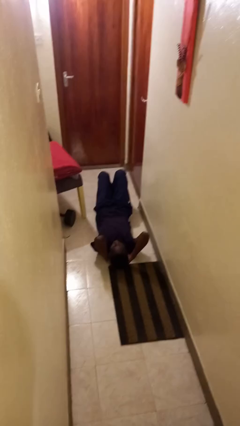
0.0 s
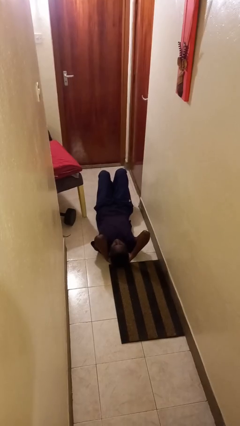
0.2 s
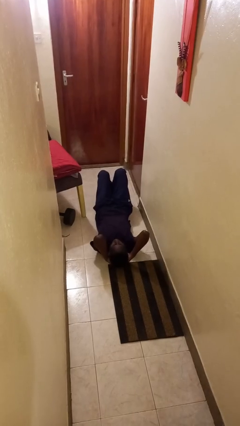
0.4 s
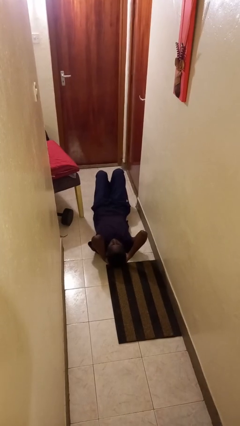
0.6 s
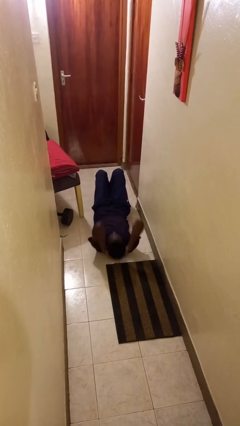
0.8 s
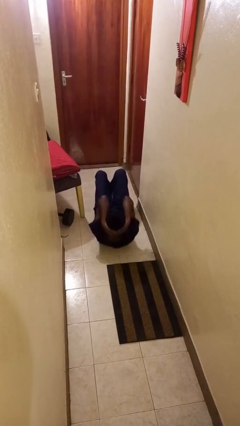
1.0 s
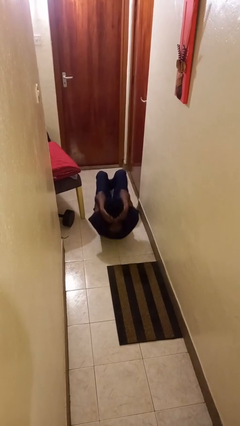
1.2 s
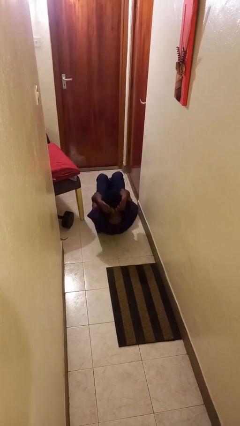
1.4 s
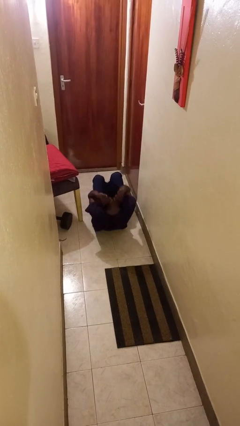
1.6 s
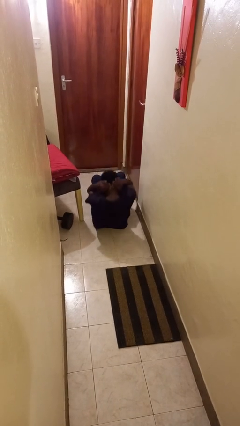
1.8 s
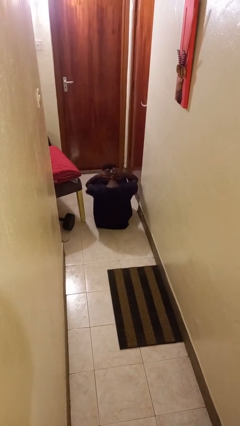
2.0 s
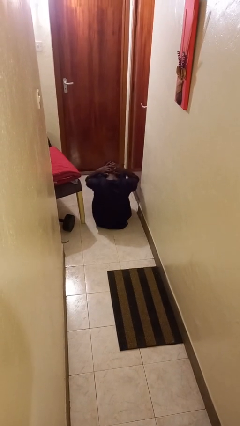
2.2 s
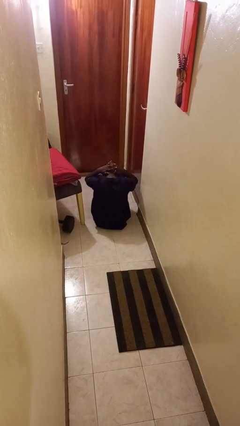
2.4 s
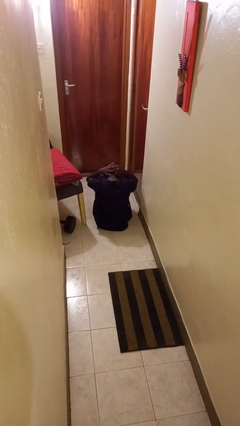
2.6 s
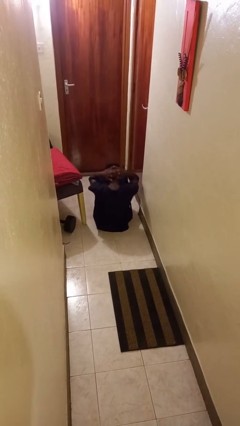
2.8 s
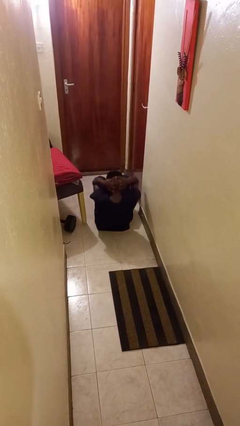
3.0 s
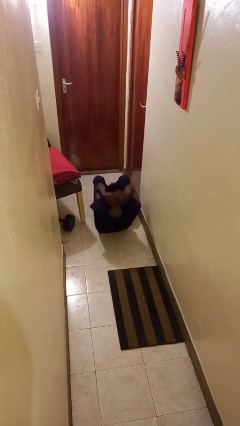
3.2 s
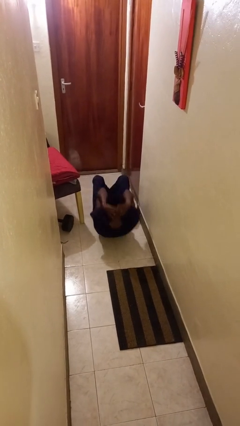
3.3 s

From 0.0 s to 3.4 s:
person exercises with situp

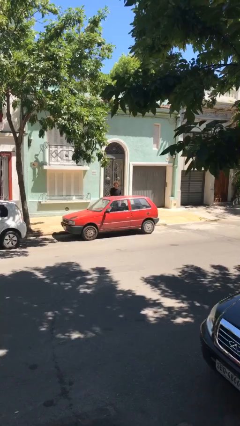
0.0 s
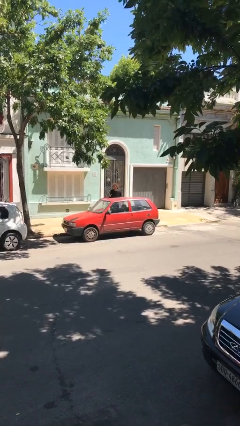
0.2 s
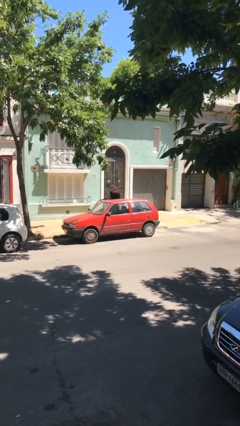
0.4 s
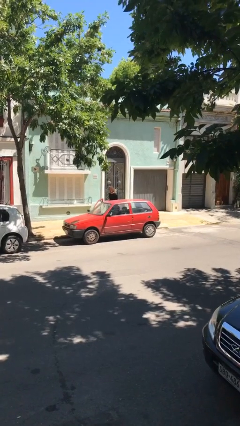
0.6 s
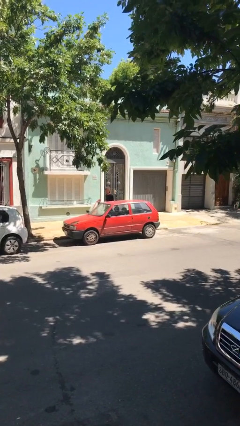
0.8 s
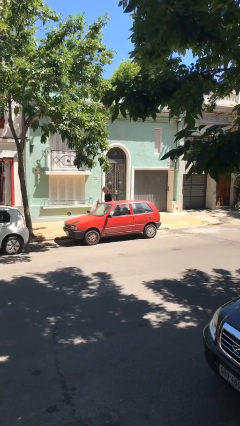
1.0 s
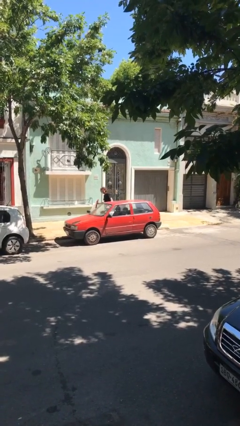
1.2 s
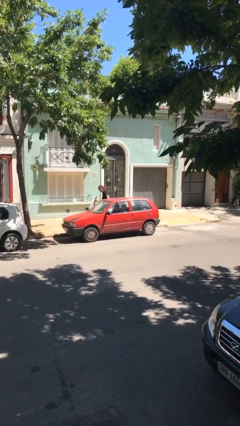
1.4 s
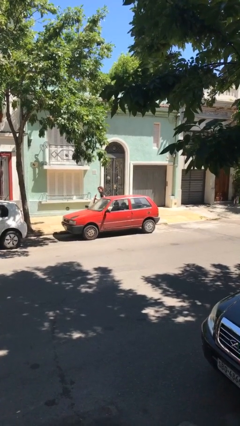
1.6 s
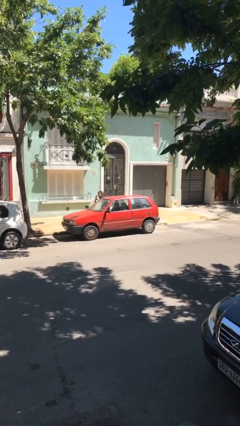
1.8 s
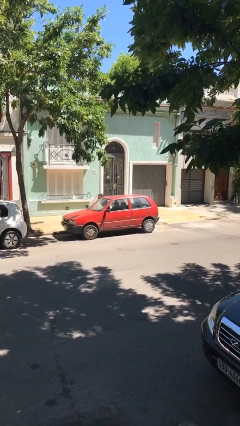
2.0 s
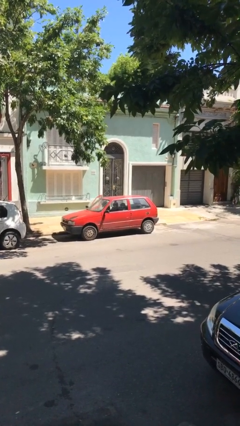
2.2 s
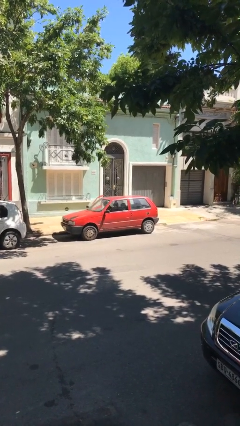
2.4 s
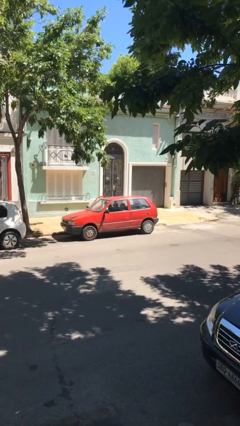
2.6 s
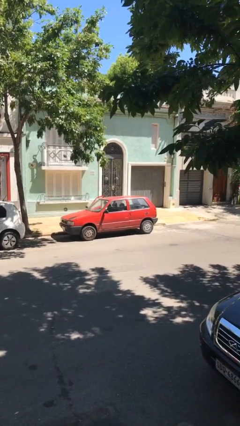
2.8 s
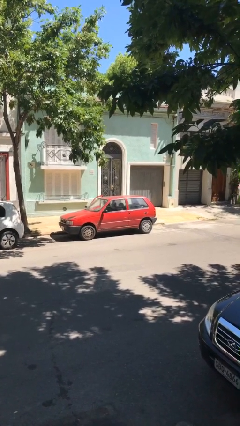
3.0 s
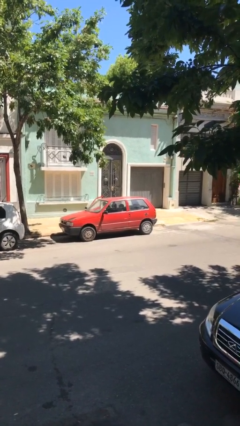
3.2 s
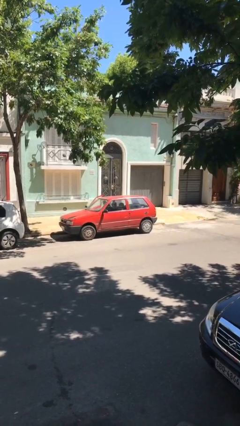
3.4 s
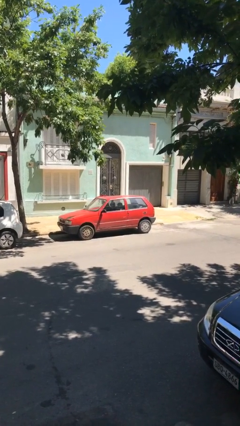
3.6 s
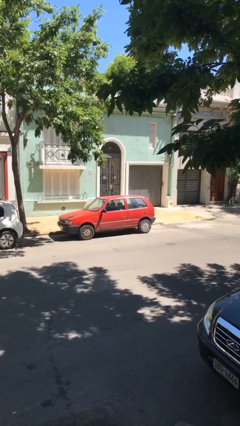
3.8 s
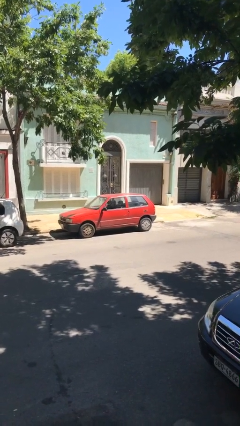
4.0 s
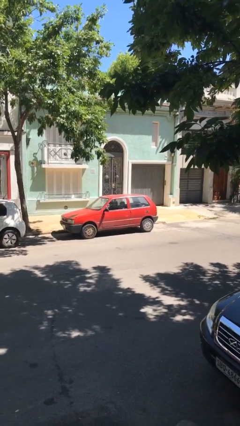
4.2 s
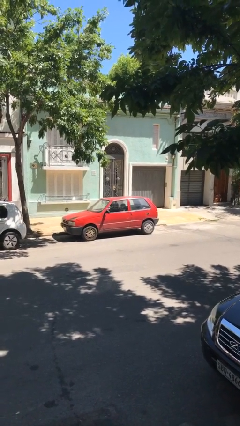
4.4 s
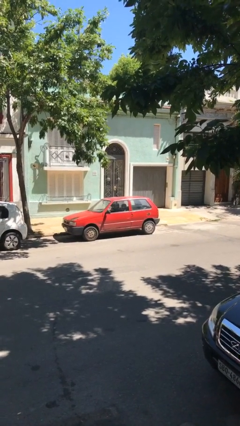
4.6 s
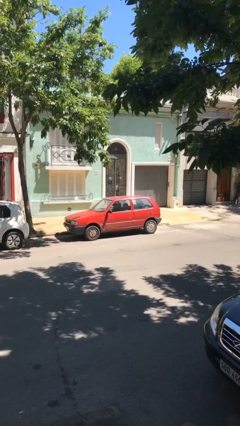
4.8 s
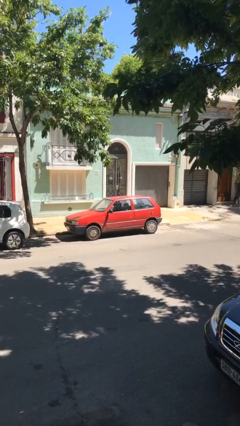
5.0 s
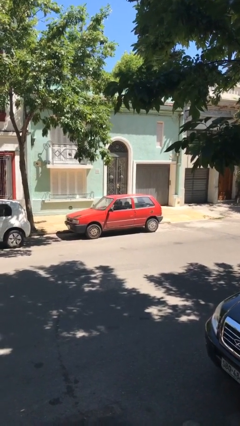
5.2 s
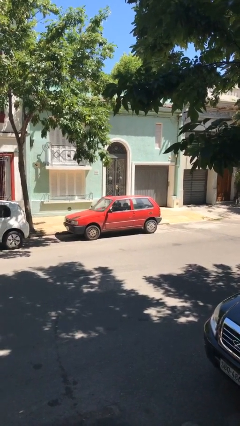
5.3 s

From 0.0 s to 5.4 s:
car picks up person

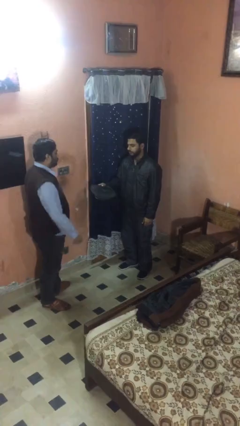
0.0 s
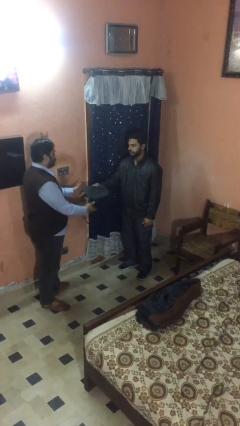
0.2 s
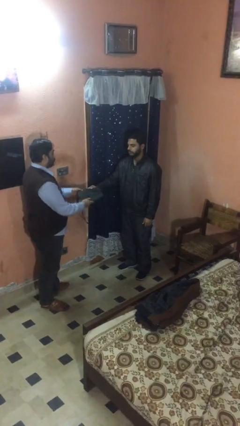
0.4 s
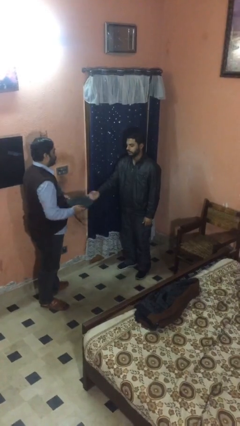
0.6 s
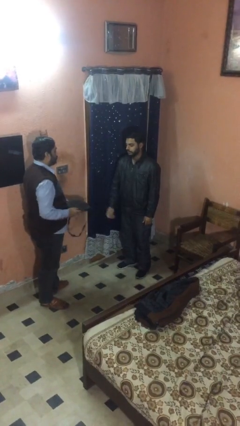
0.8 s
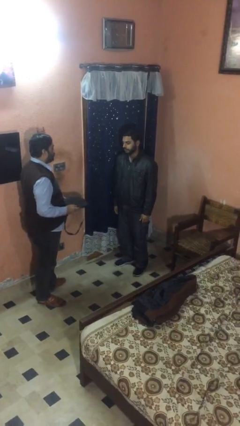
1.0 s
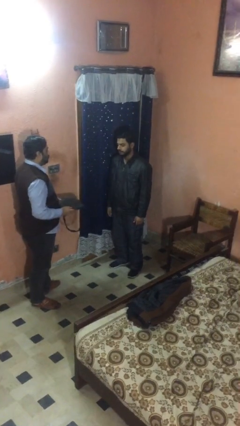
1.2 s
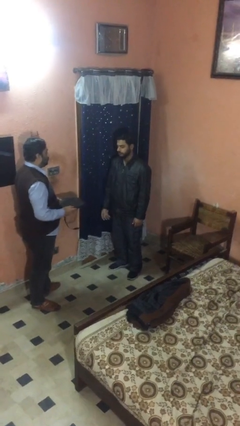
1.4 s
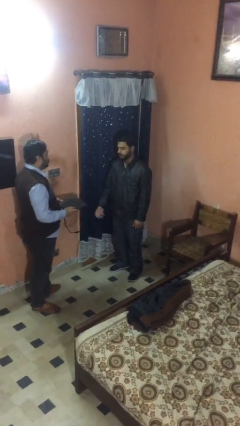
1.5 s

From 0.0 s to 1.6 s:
person transfers object to person

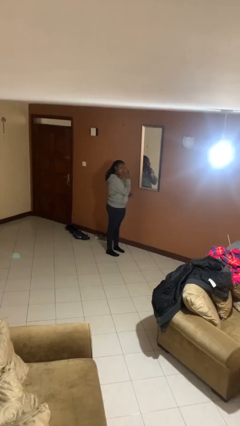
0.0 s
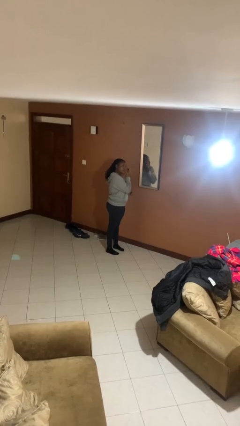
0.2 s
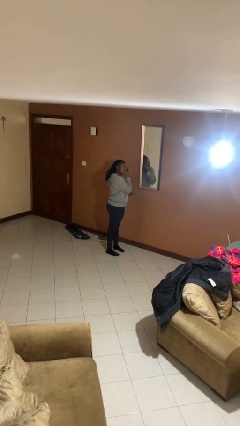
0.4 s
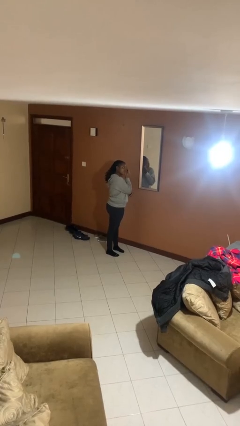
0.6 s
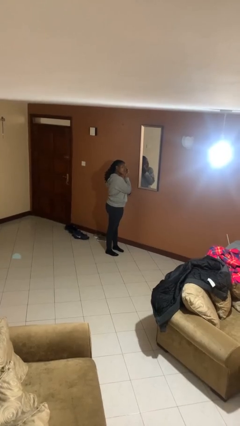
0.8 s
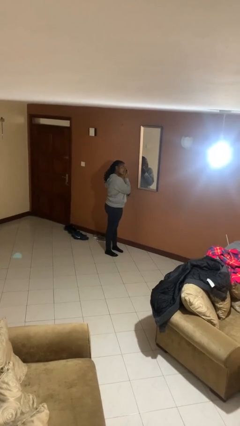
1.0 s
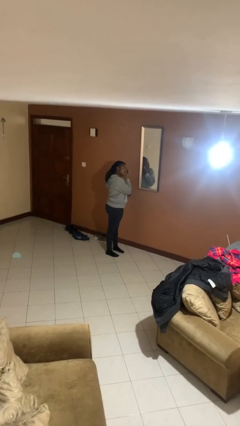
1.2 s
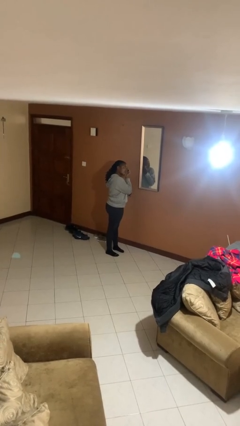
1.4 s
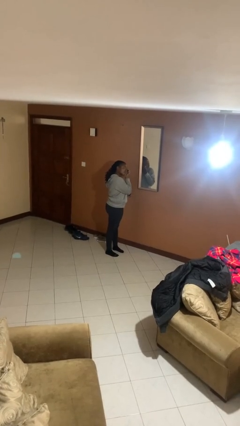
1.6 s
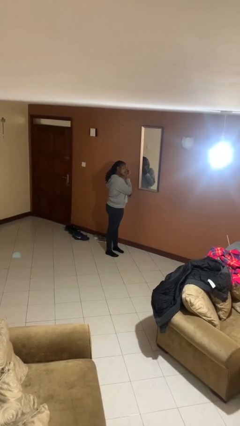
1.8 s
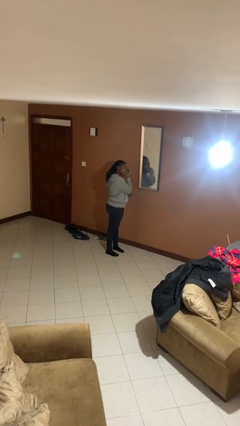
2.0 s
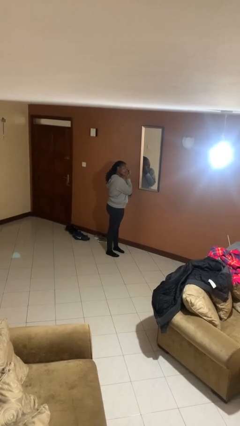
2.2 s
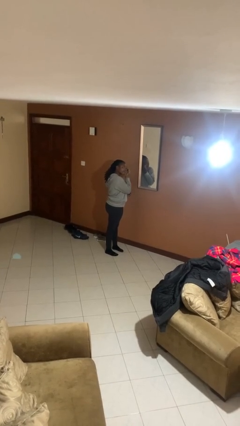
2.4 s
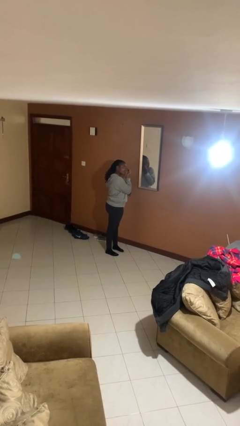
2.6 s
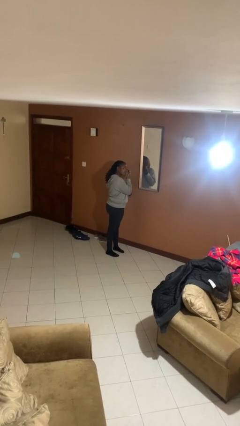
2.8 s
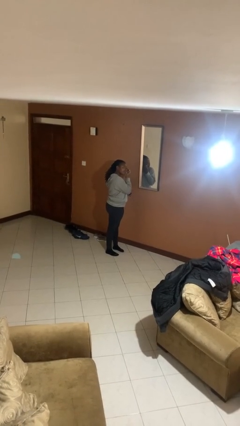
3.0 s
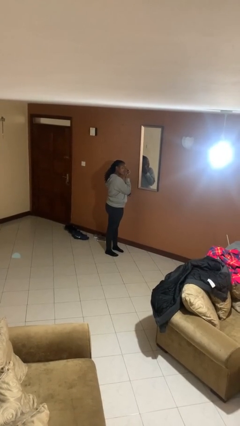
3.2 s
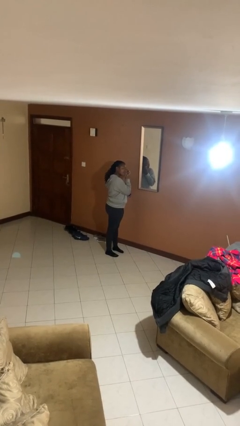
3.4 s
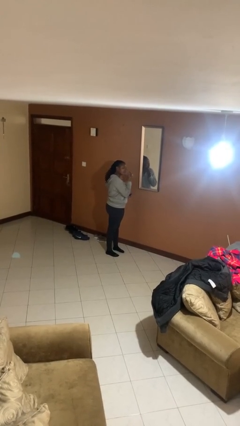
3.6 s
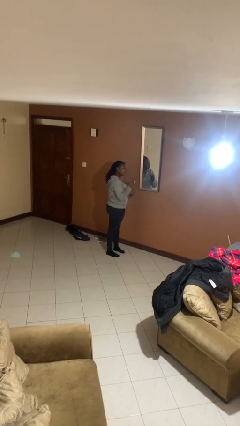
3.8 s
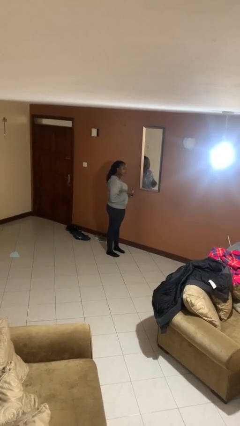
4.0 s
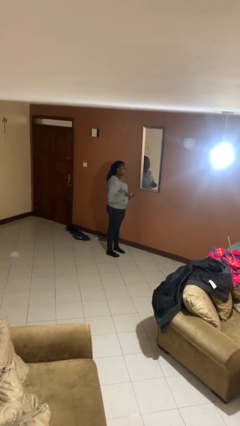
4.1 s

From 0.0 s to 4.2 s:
person applies eye makeup

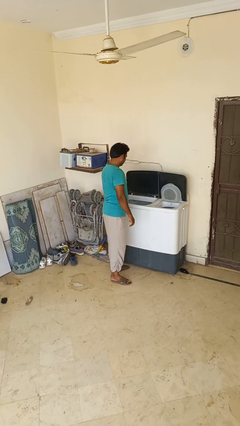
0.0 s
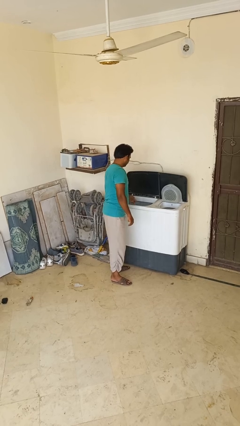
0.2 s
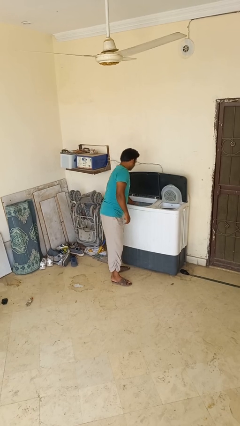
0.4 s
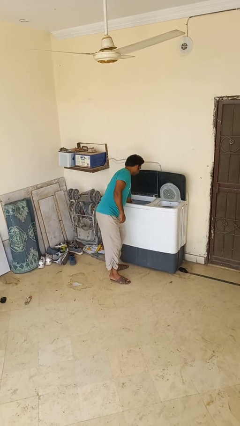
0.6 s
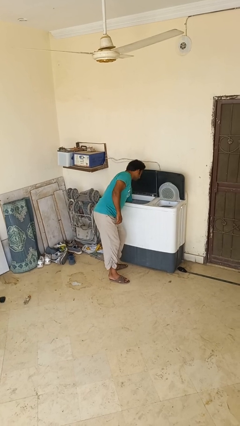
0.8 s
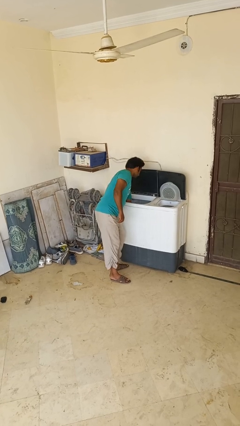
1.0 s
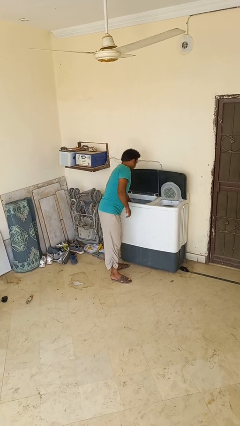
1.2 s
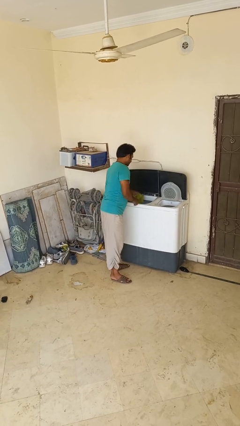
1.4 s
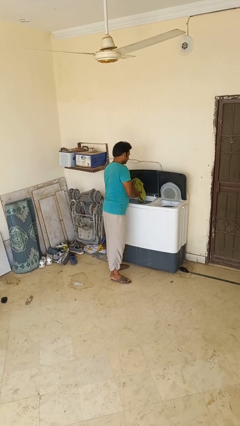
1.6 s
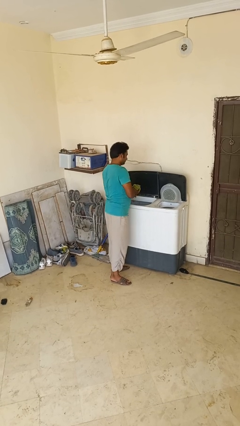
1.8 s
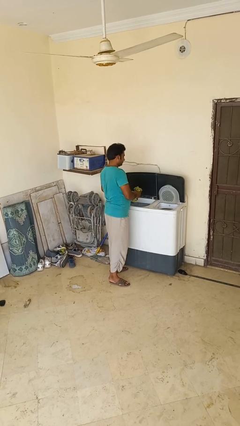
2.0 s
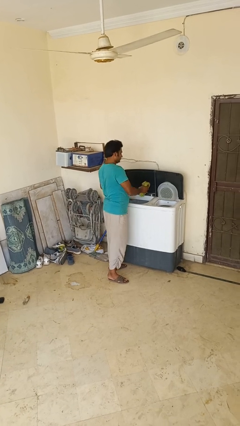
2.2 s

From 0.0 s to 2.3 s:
person unloads clotheswasher

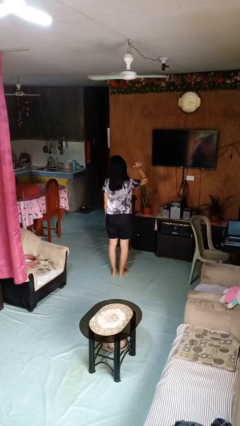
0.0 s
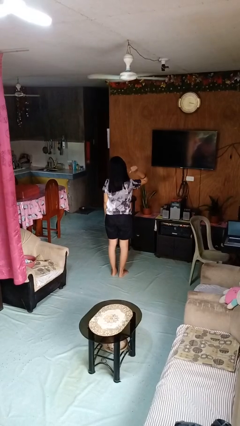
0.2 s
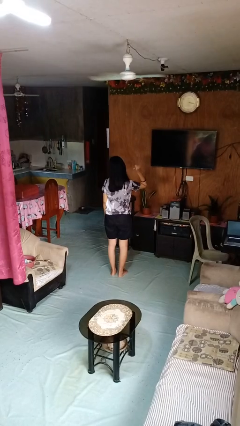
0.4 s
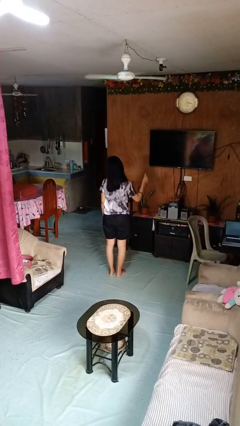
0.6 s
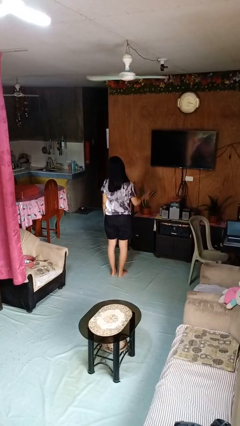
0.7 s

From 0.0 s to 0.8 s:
person gestures behind me
